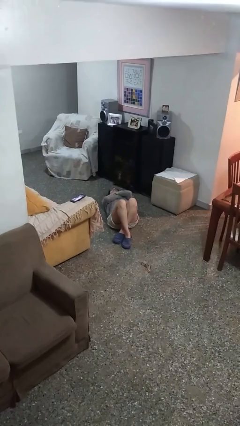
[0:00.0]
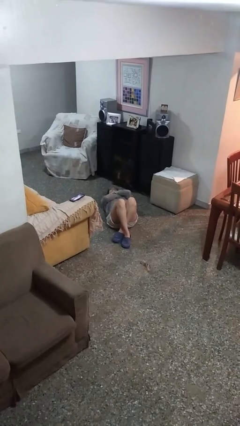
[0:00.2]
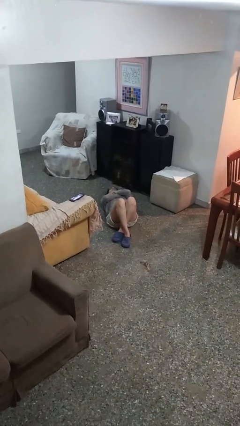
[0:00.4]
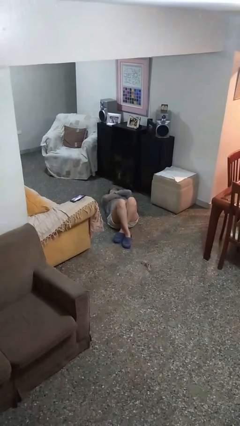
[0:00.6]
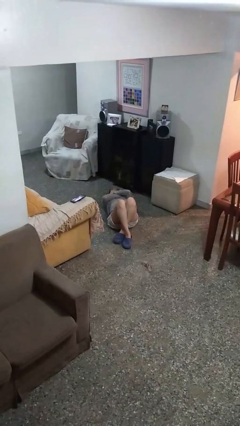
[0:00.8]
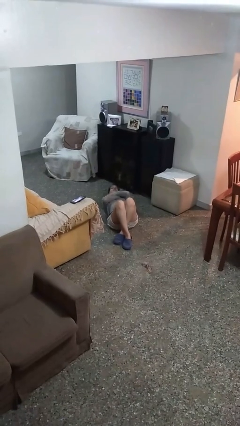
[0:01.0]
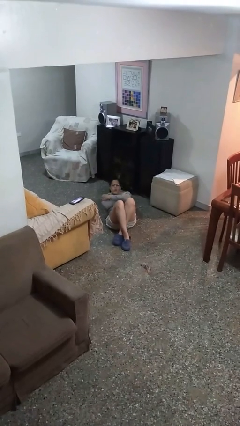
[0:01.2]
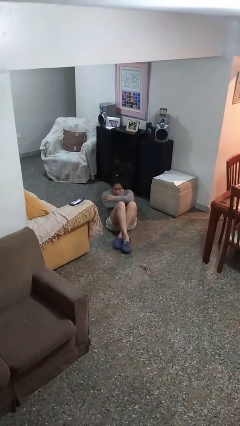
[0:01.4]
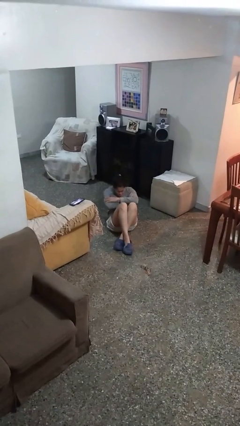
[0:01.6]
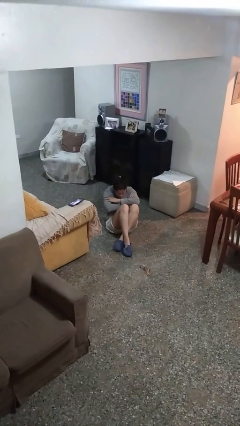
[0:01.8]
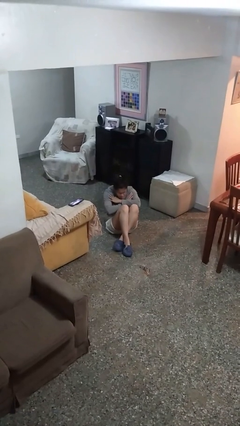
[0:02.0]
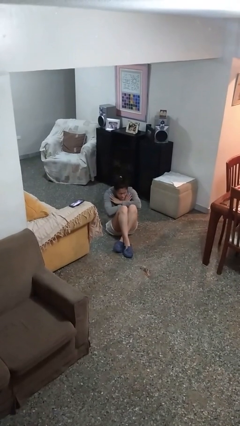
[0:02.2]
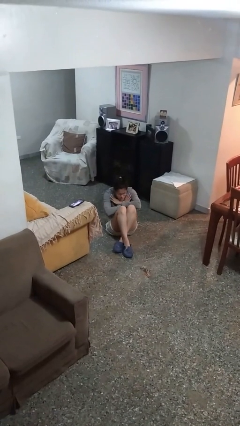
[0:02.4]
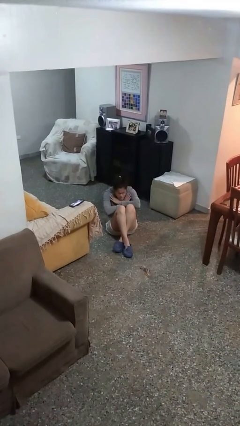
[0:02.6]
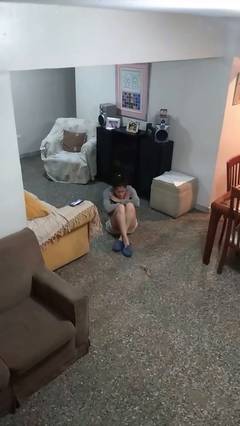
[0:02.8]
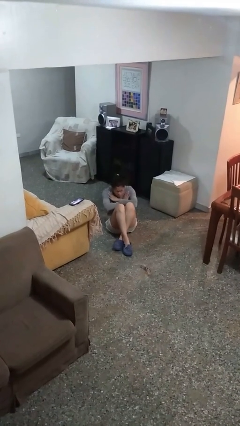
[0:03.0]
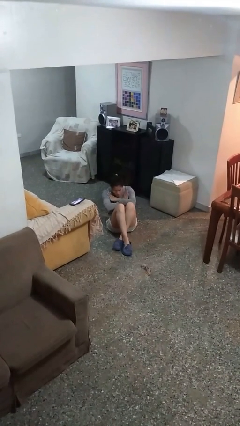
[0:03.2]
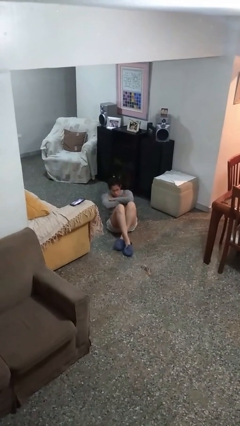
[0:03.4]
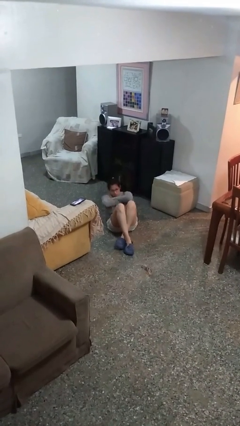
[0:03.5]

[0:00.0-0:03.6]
person exercises with situp

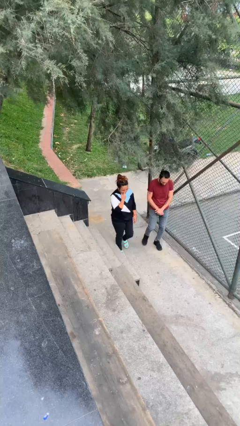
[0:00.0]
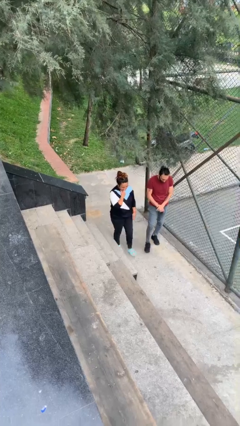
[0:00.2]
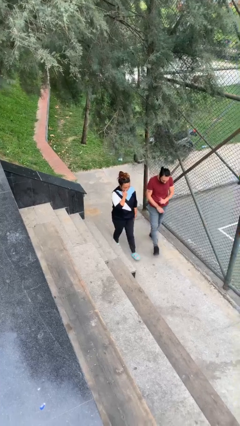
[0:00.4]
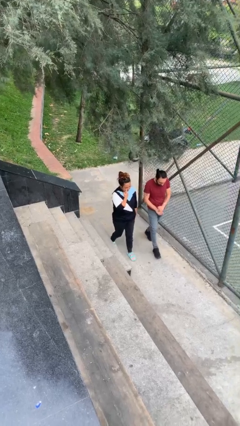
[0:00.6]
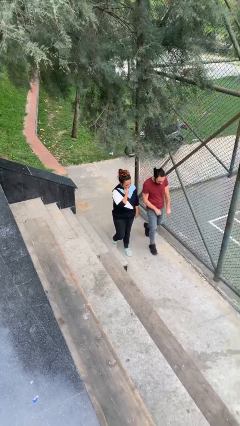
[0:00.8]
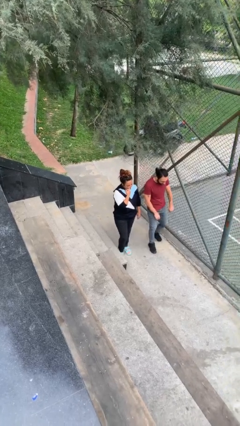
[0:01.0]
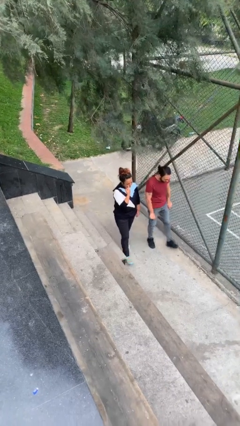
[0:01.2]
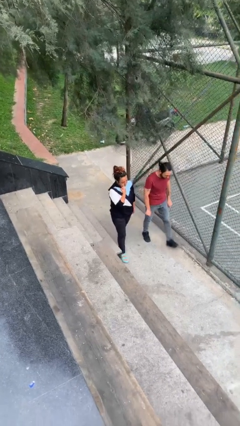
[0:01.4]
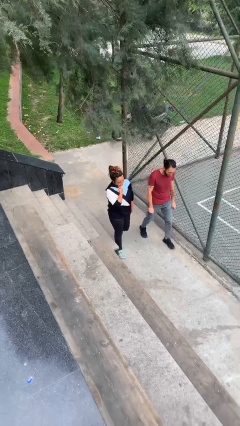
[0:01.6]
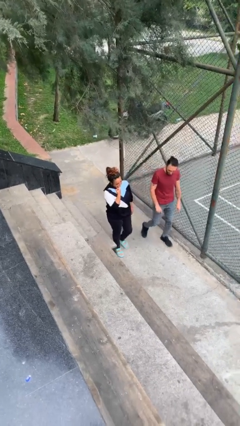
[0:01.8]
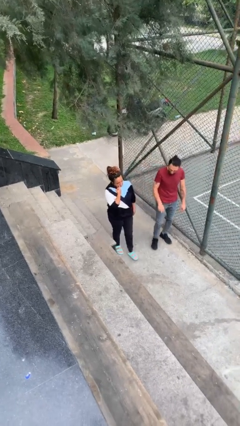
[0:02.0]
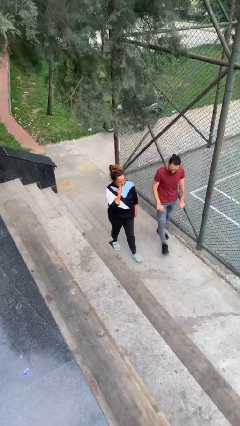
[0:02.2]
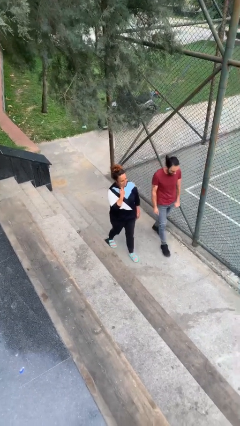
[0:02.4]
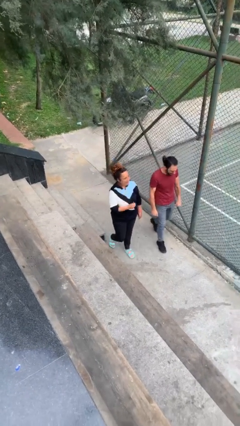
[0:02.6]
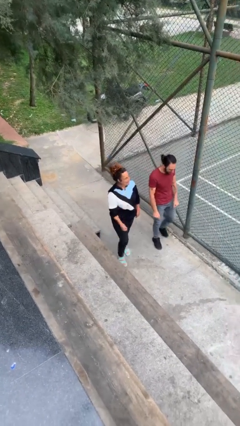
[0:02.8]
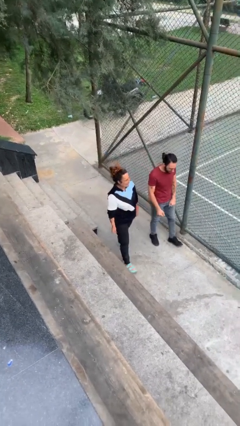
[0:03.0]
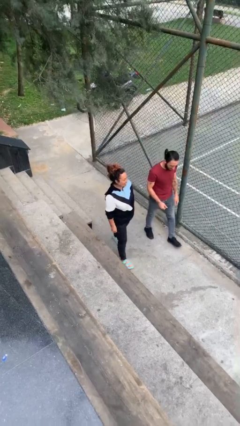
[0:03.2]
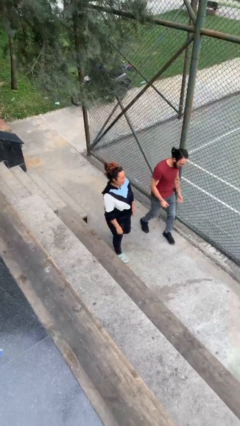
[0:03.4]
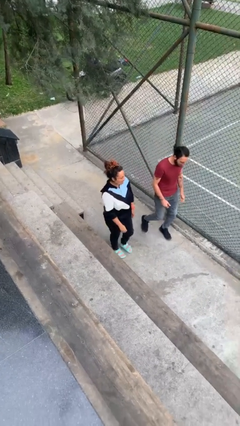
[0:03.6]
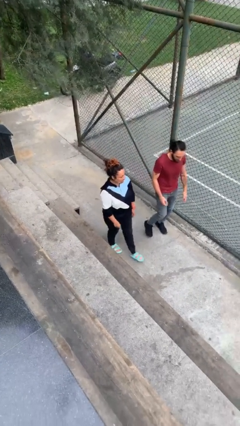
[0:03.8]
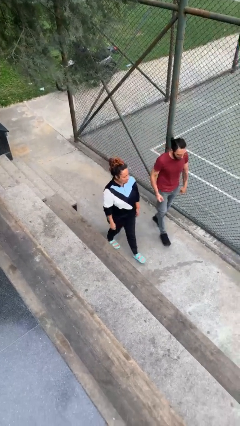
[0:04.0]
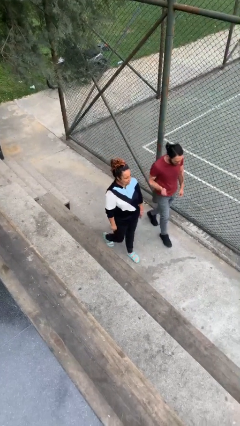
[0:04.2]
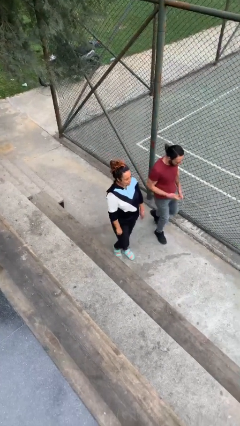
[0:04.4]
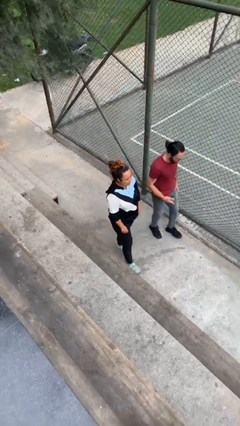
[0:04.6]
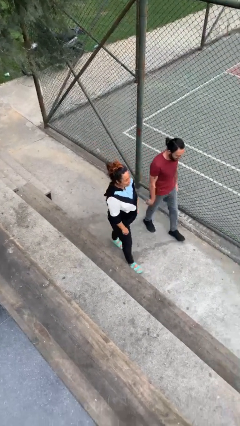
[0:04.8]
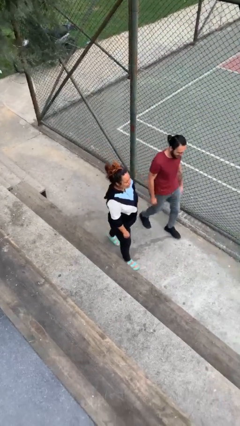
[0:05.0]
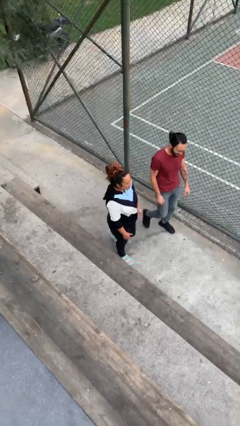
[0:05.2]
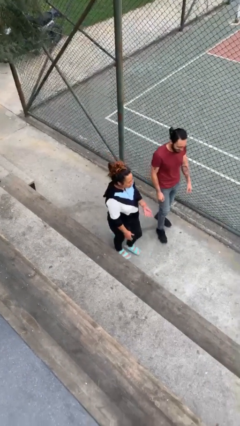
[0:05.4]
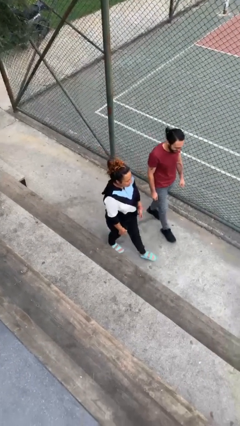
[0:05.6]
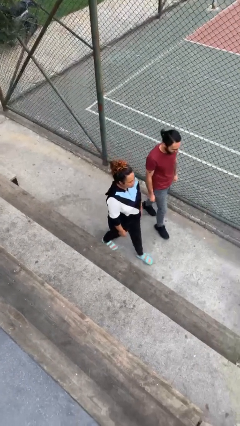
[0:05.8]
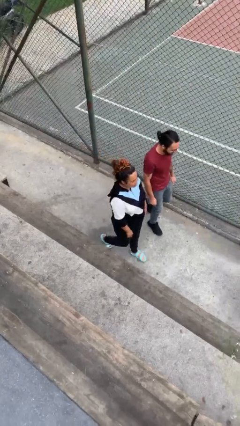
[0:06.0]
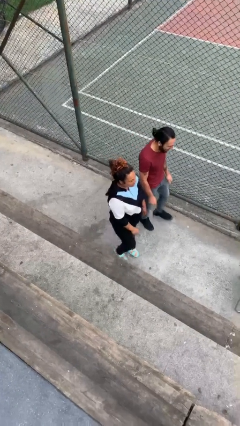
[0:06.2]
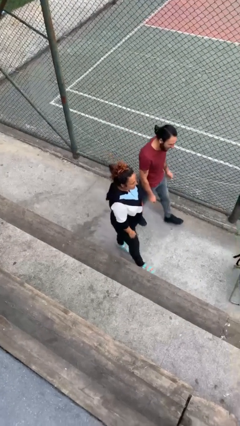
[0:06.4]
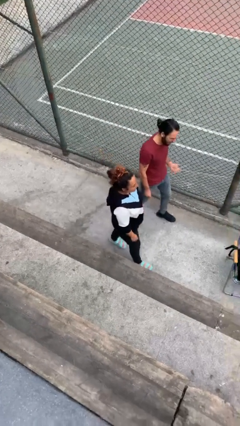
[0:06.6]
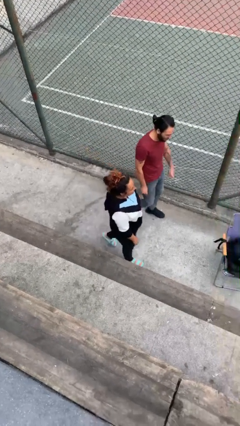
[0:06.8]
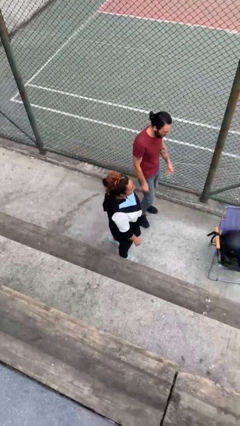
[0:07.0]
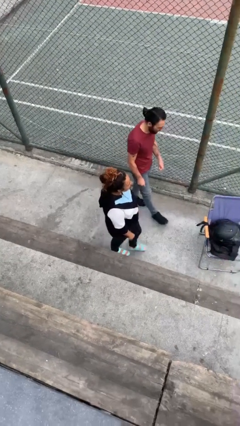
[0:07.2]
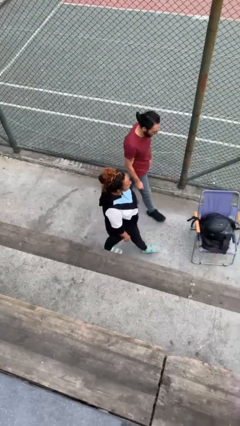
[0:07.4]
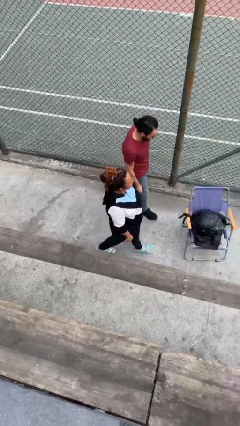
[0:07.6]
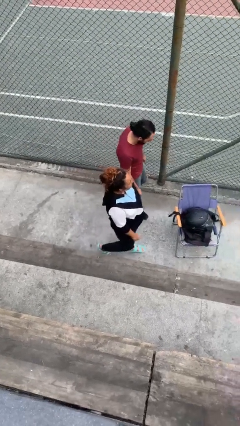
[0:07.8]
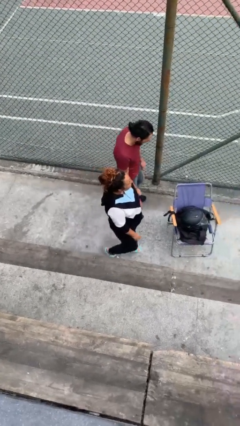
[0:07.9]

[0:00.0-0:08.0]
person talks to person

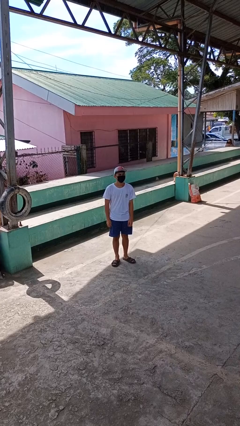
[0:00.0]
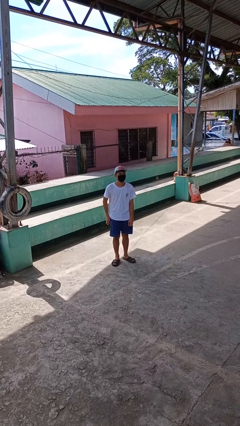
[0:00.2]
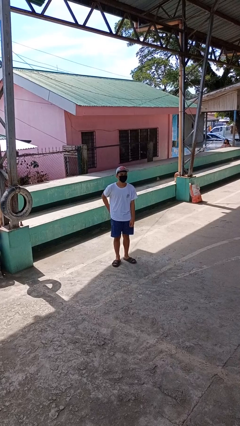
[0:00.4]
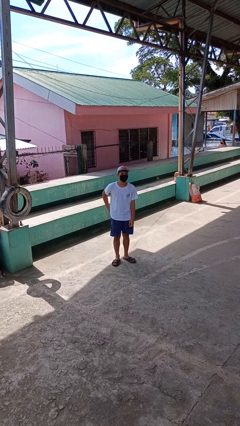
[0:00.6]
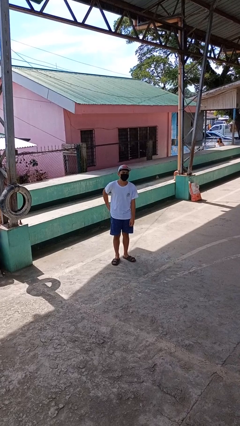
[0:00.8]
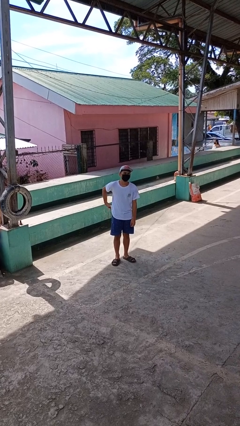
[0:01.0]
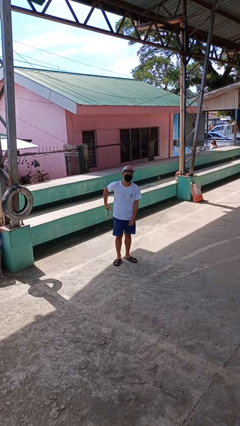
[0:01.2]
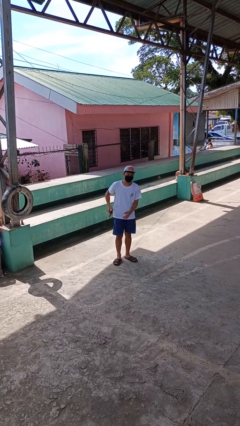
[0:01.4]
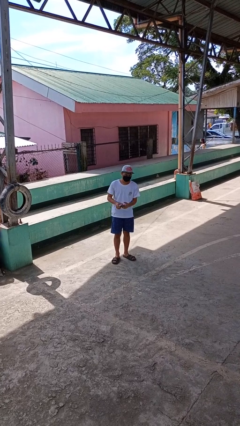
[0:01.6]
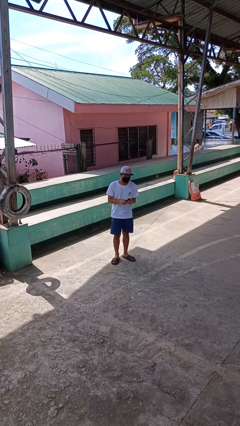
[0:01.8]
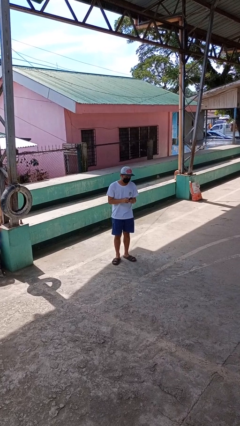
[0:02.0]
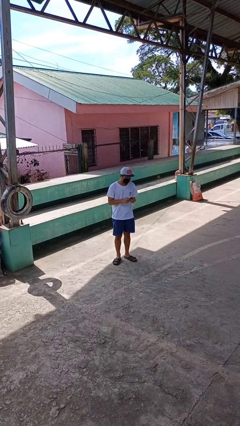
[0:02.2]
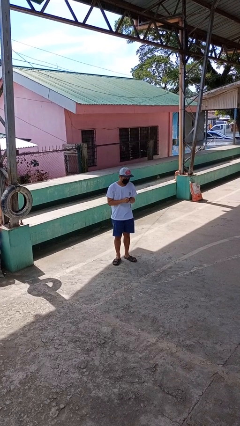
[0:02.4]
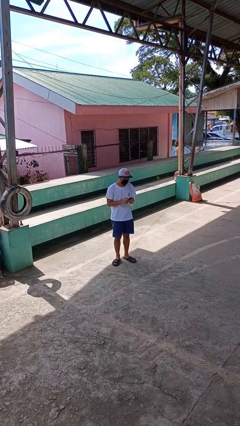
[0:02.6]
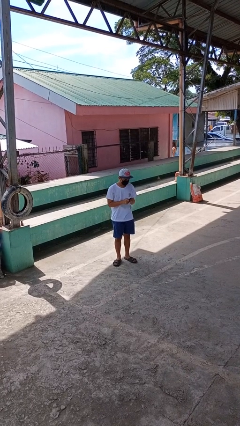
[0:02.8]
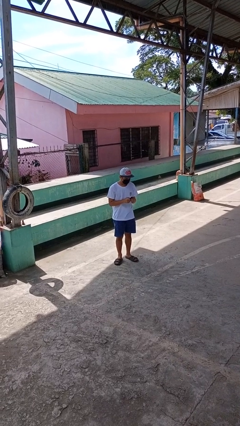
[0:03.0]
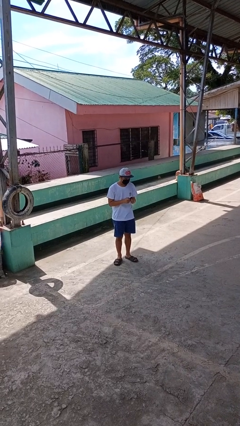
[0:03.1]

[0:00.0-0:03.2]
person takes phone from pocket

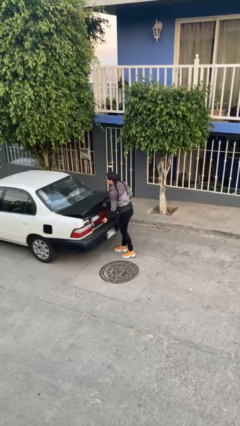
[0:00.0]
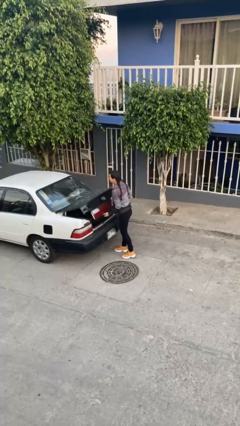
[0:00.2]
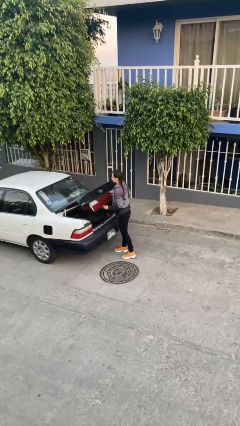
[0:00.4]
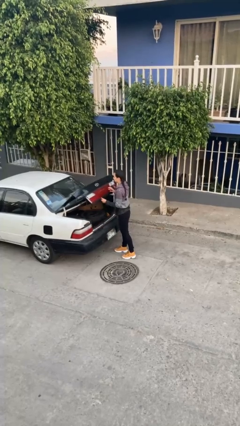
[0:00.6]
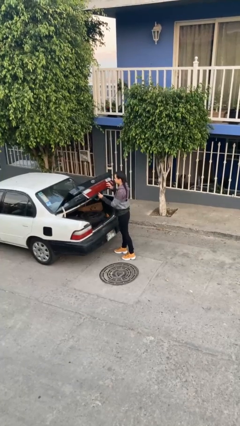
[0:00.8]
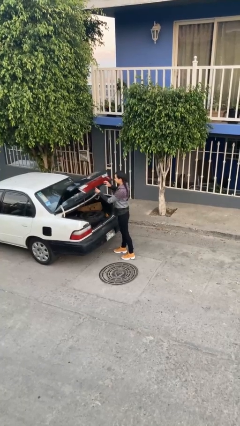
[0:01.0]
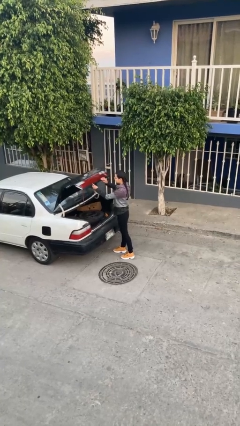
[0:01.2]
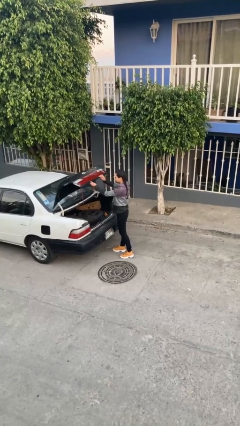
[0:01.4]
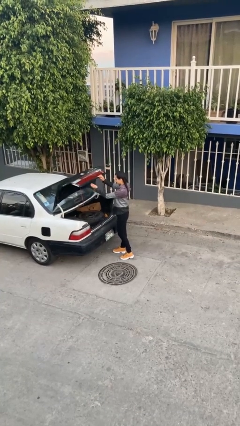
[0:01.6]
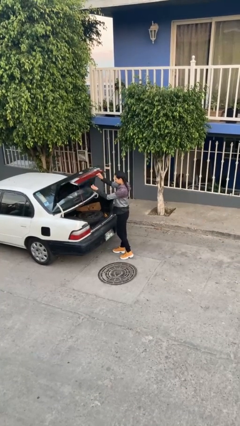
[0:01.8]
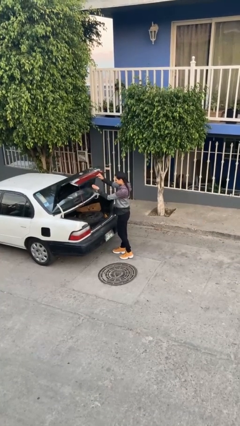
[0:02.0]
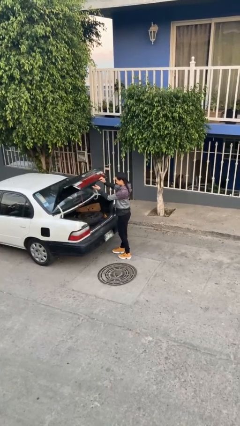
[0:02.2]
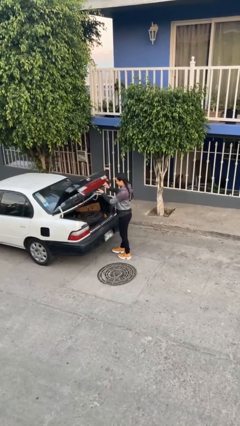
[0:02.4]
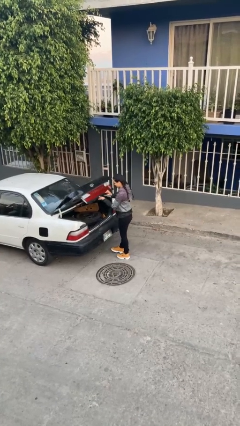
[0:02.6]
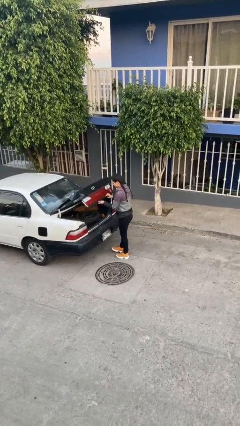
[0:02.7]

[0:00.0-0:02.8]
person opens car trunk
